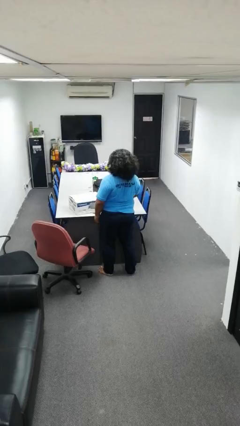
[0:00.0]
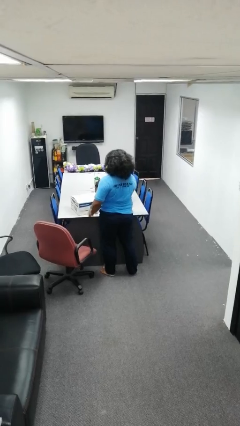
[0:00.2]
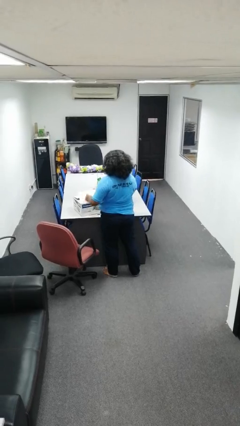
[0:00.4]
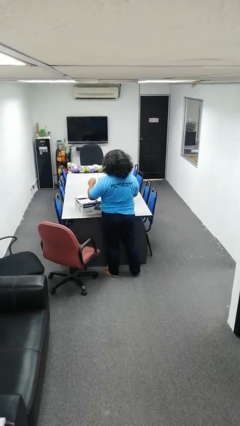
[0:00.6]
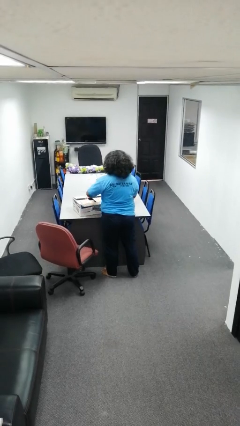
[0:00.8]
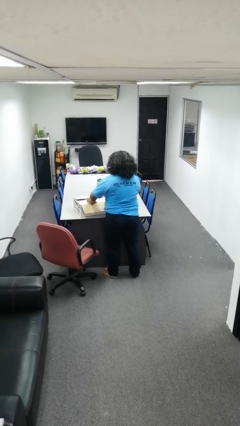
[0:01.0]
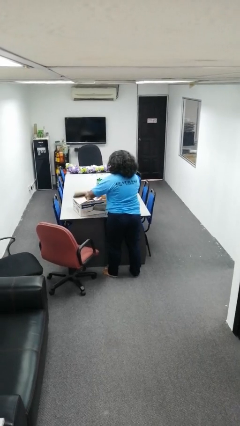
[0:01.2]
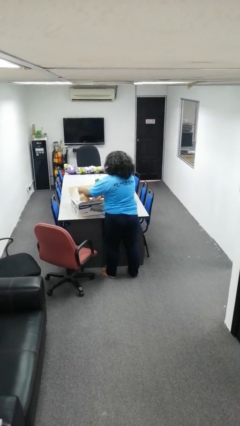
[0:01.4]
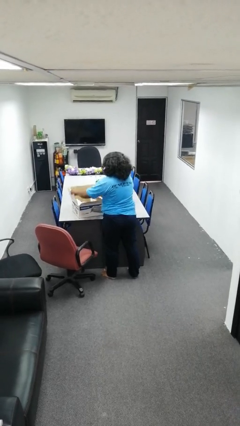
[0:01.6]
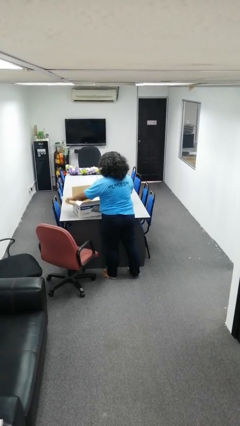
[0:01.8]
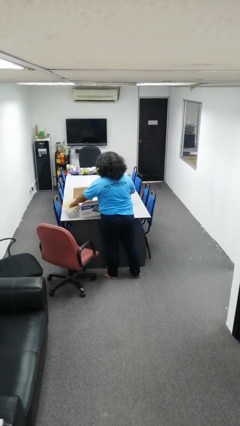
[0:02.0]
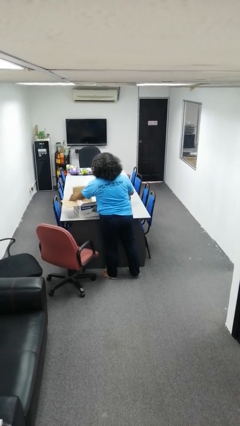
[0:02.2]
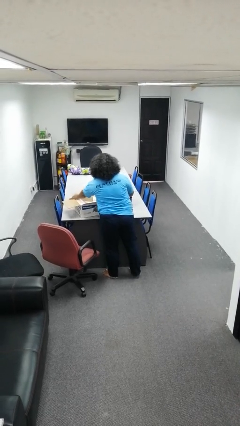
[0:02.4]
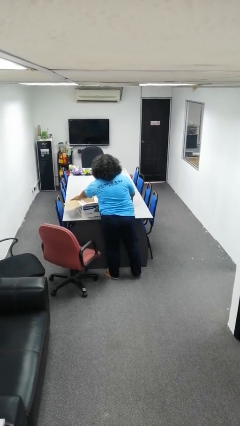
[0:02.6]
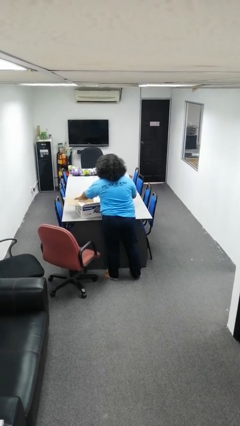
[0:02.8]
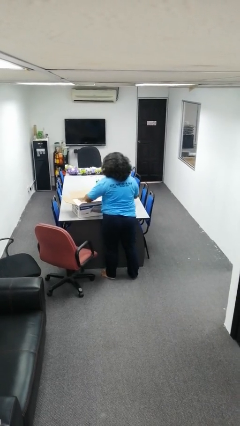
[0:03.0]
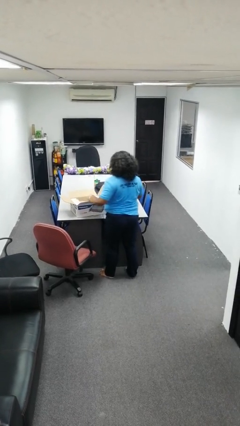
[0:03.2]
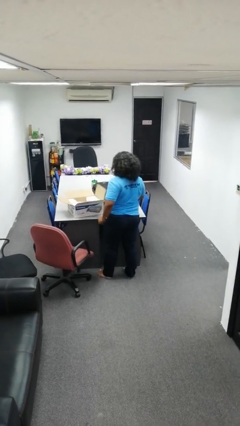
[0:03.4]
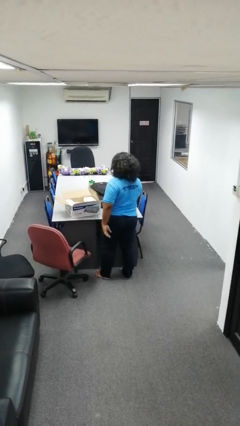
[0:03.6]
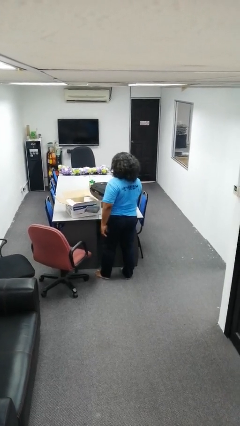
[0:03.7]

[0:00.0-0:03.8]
person opens box

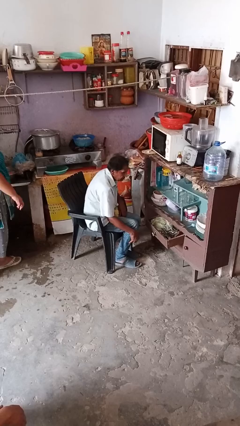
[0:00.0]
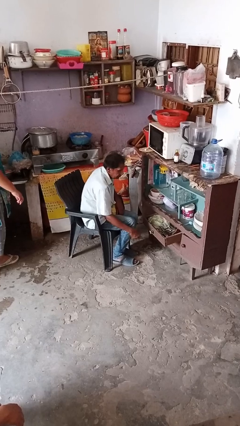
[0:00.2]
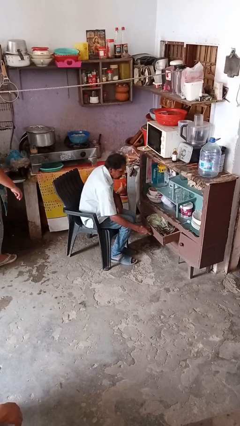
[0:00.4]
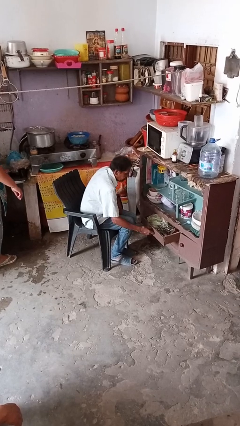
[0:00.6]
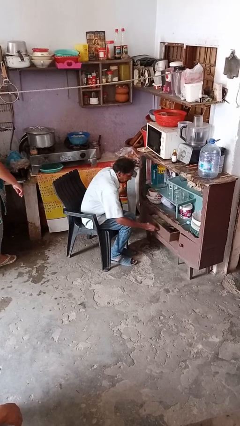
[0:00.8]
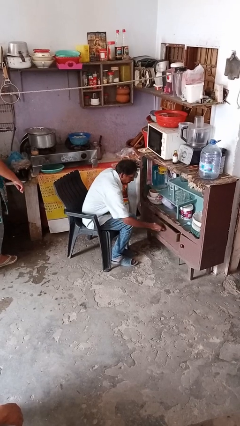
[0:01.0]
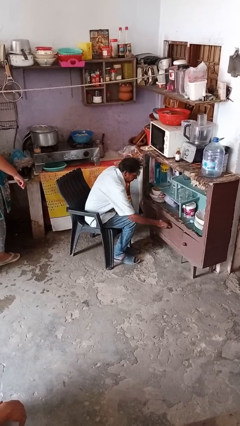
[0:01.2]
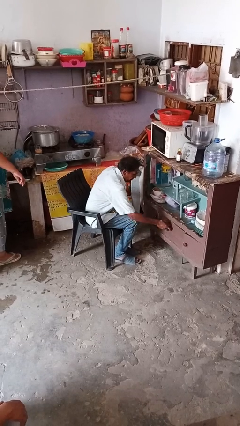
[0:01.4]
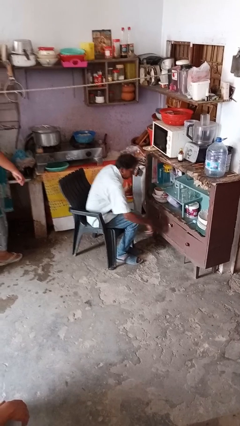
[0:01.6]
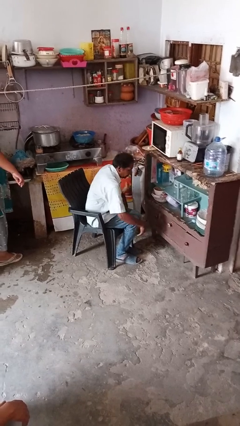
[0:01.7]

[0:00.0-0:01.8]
person closes dresser drawer

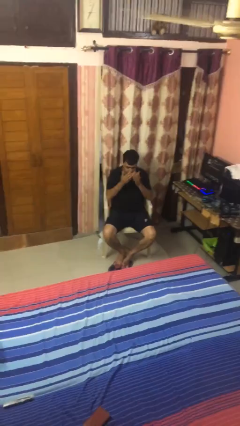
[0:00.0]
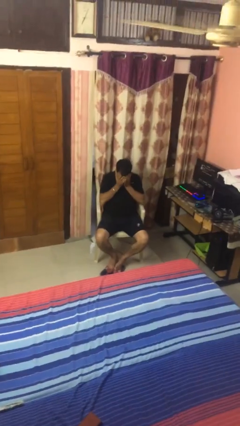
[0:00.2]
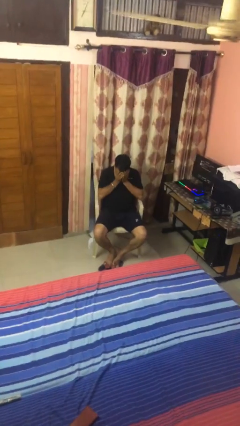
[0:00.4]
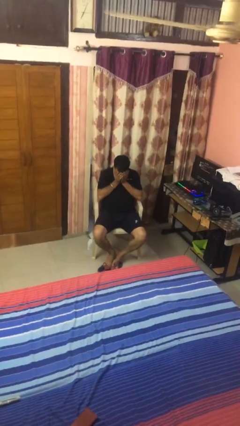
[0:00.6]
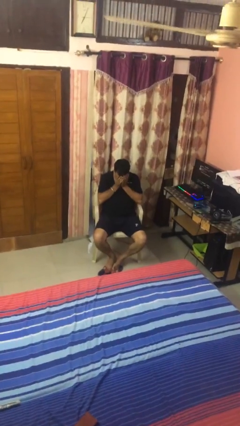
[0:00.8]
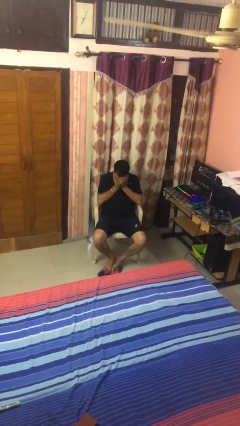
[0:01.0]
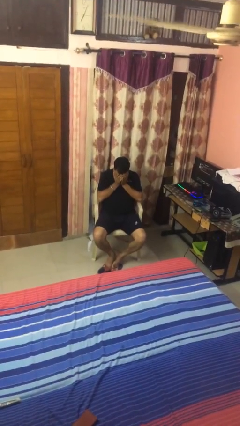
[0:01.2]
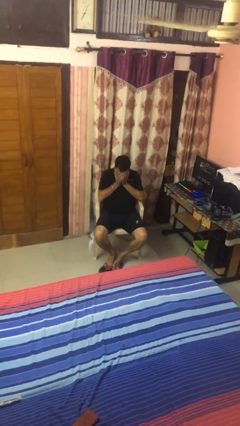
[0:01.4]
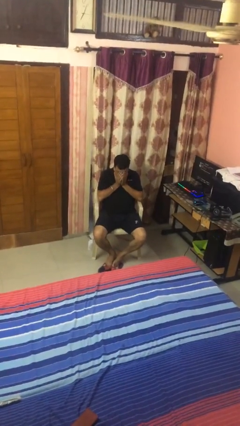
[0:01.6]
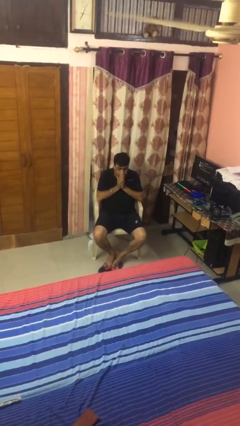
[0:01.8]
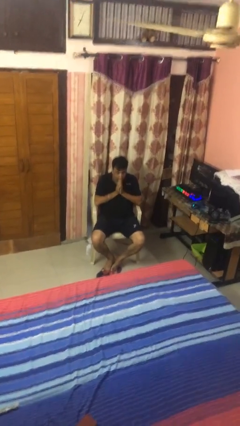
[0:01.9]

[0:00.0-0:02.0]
person covers face with hands

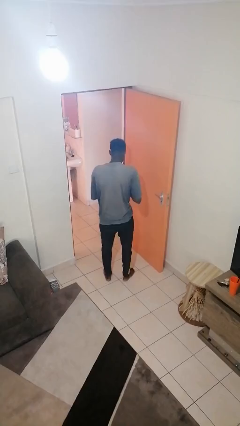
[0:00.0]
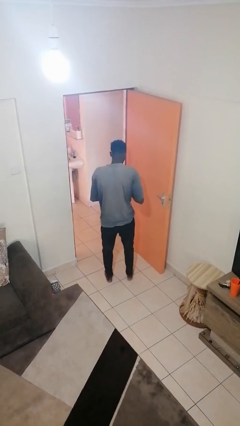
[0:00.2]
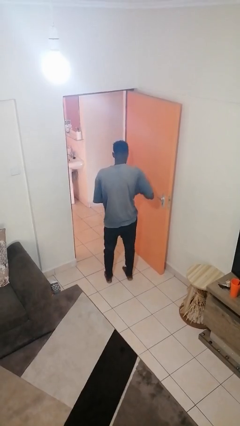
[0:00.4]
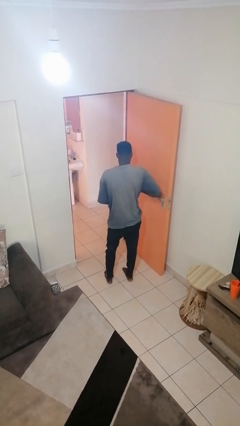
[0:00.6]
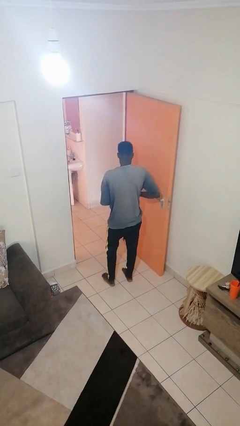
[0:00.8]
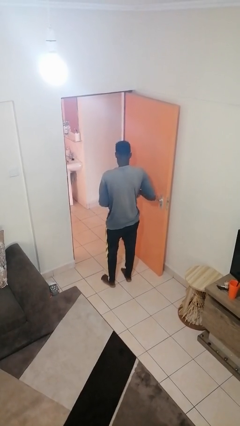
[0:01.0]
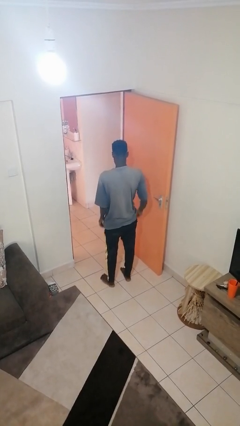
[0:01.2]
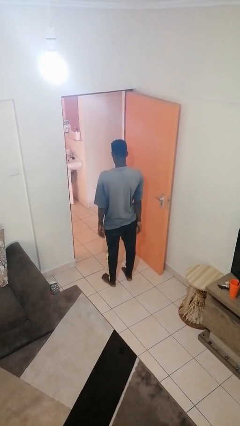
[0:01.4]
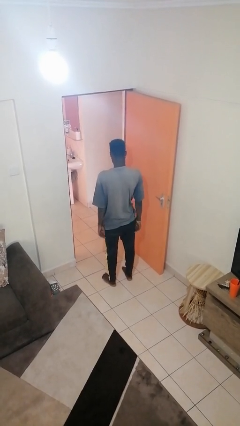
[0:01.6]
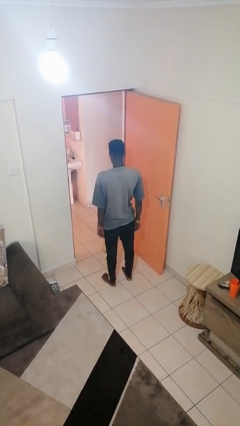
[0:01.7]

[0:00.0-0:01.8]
person puts phone into pocket

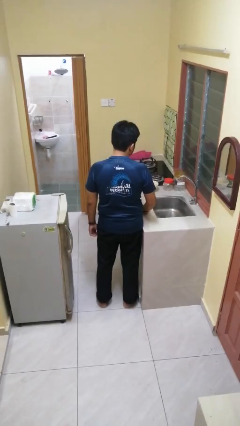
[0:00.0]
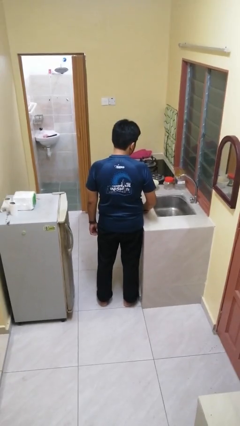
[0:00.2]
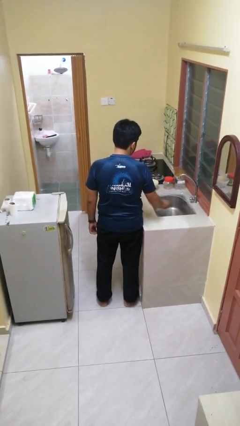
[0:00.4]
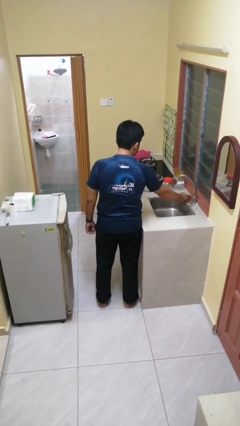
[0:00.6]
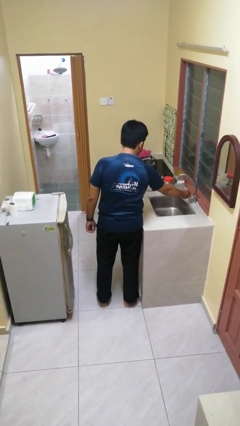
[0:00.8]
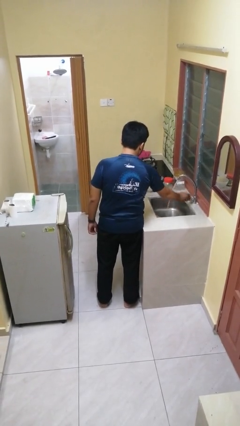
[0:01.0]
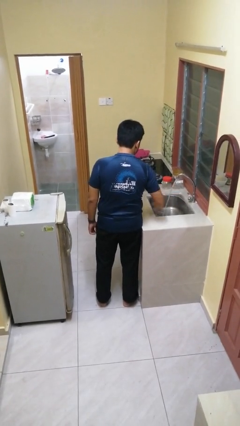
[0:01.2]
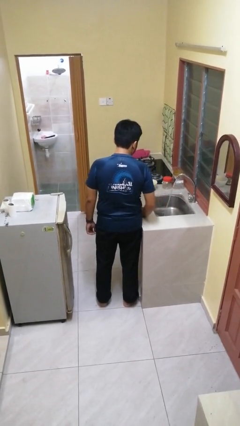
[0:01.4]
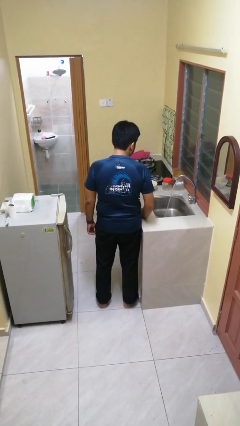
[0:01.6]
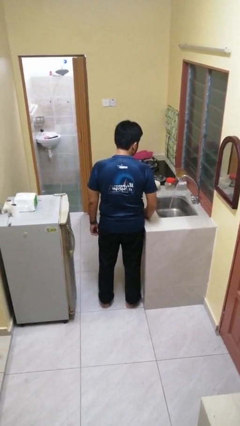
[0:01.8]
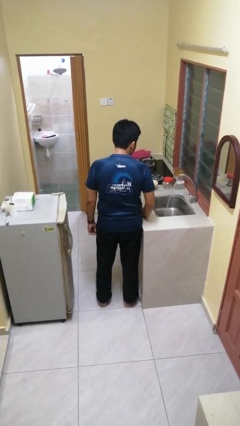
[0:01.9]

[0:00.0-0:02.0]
person turns on faucet

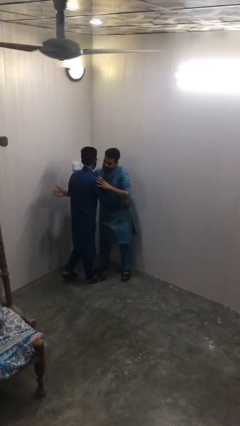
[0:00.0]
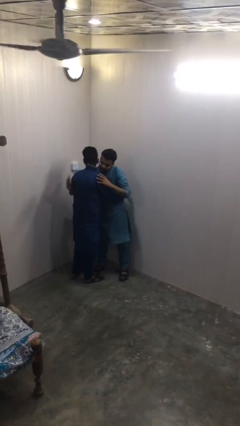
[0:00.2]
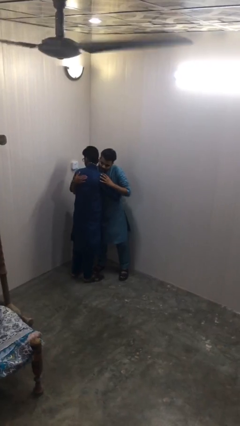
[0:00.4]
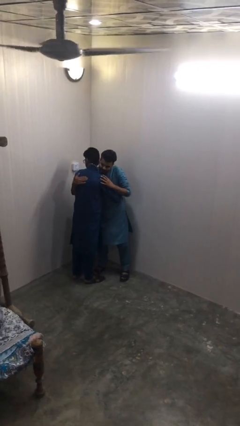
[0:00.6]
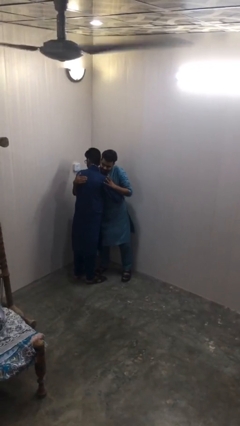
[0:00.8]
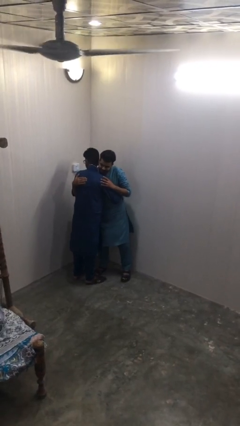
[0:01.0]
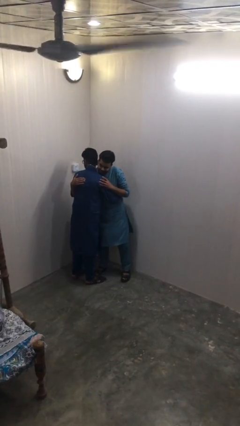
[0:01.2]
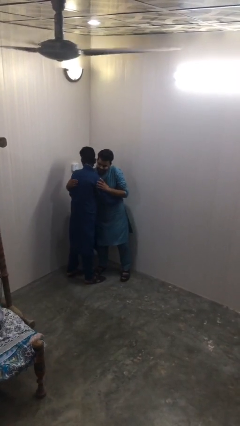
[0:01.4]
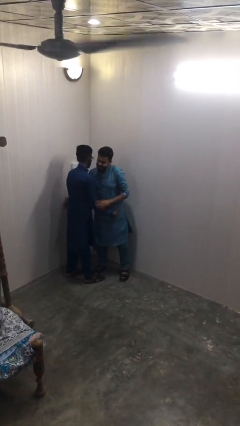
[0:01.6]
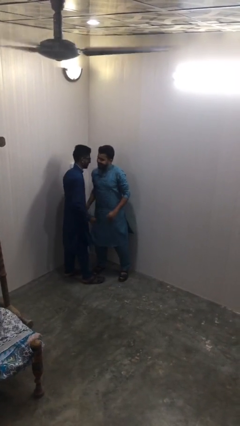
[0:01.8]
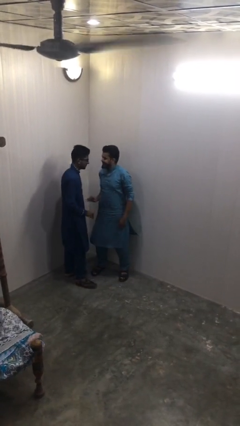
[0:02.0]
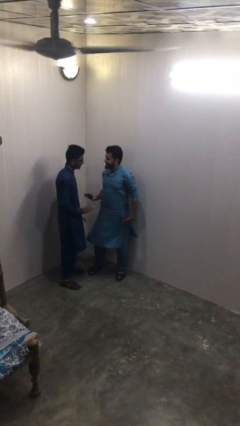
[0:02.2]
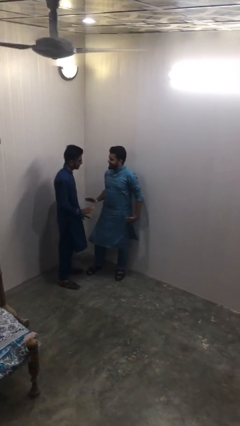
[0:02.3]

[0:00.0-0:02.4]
person embraces person

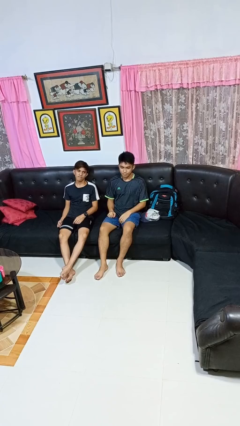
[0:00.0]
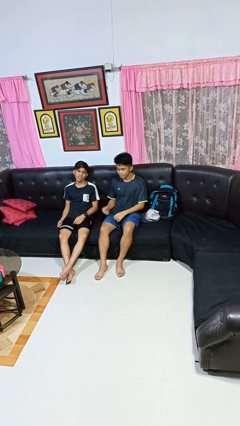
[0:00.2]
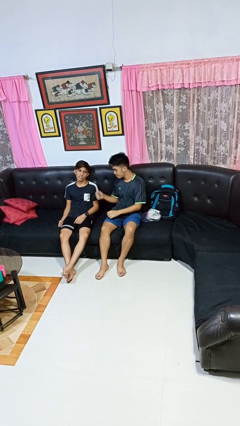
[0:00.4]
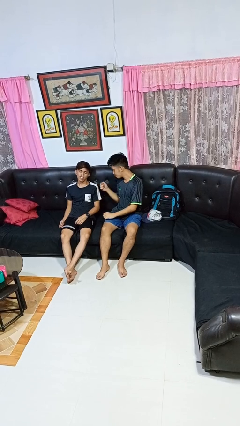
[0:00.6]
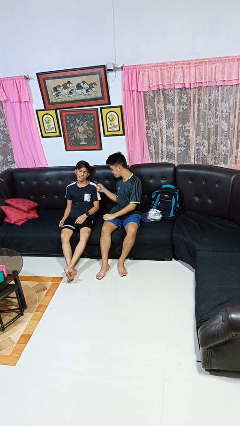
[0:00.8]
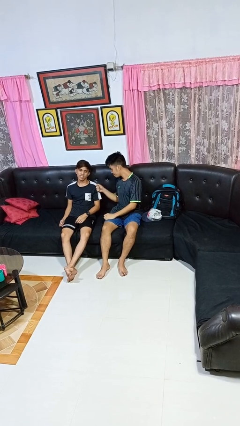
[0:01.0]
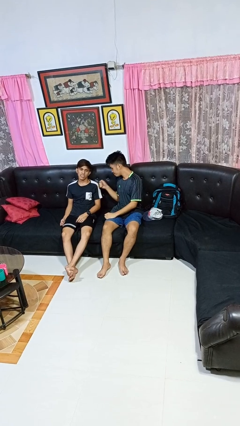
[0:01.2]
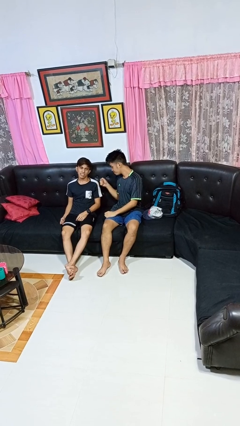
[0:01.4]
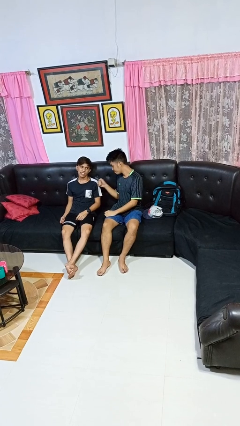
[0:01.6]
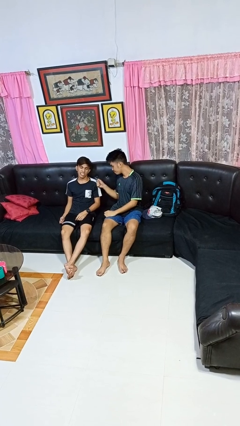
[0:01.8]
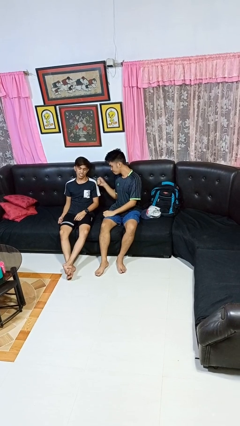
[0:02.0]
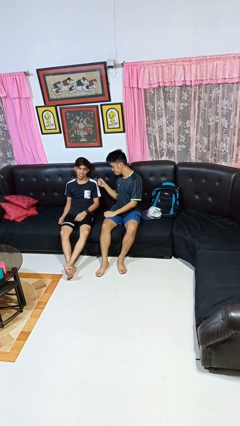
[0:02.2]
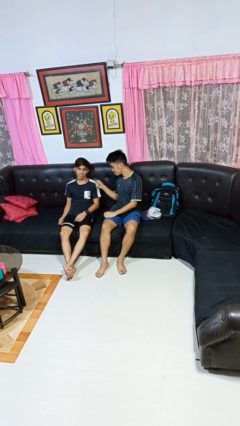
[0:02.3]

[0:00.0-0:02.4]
person pounds shoulders of person

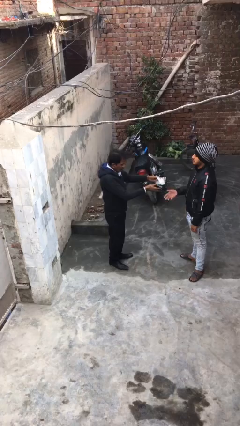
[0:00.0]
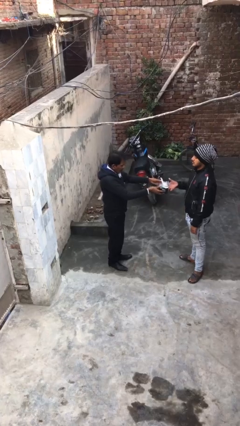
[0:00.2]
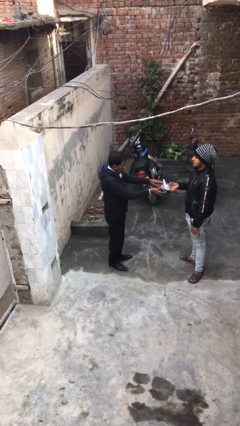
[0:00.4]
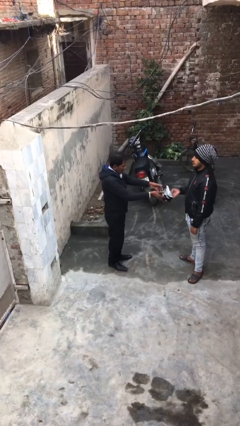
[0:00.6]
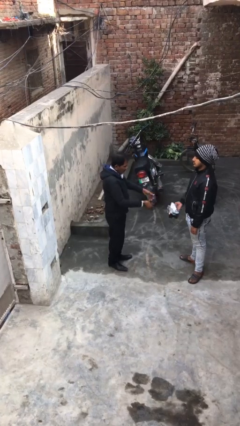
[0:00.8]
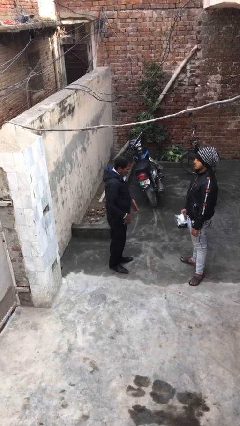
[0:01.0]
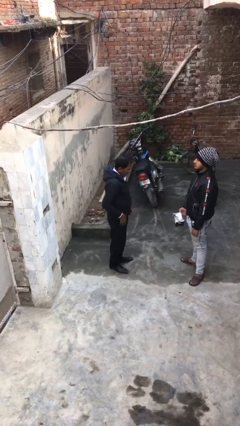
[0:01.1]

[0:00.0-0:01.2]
person transfers object to person
